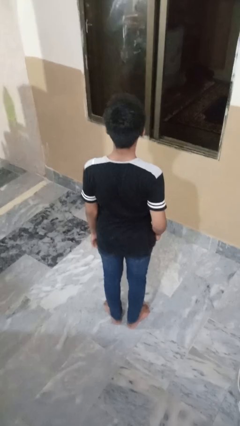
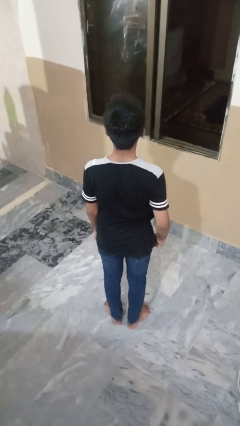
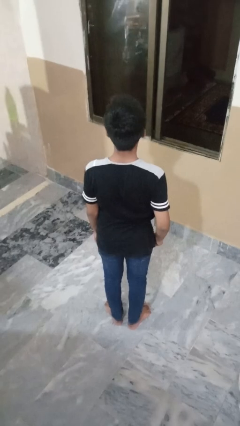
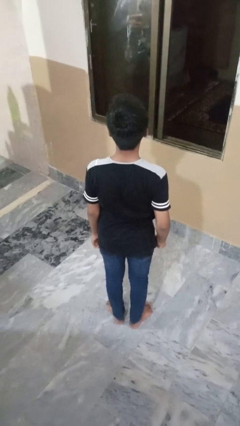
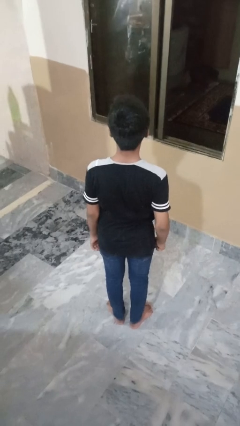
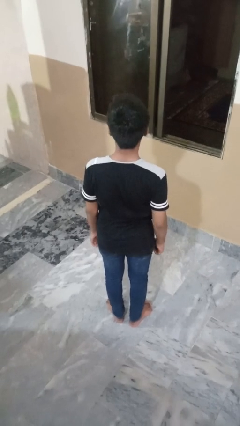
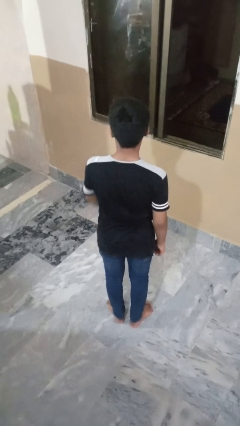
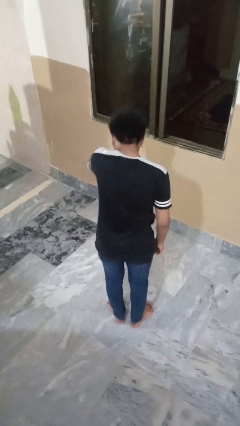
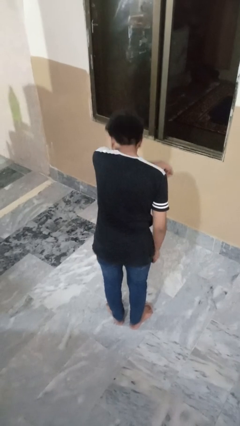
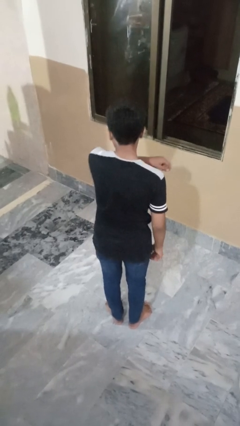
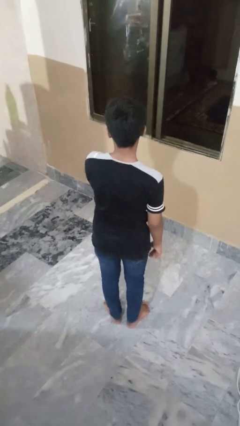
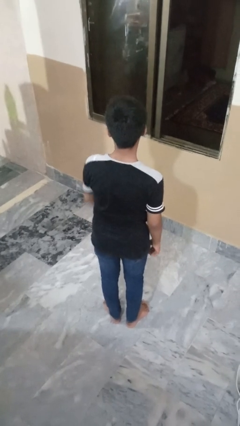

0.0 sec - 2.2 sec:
person sneezes into arm

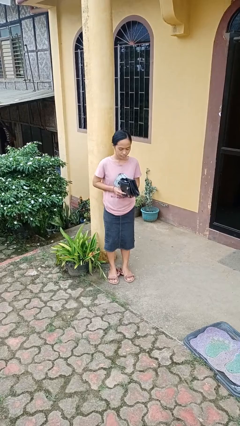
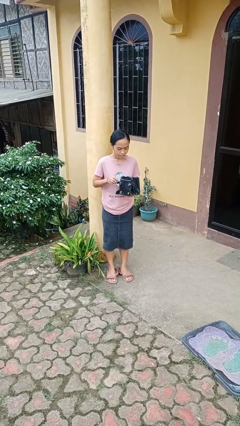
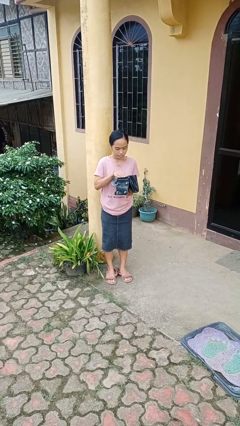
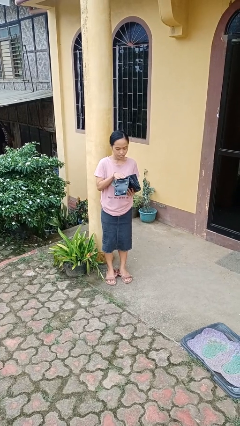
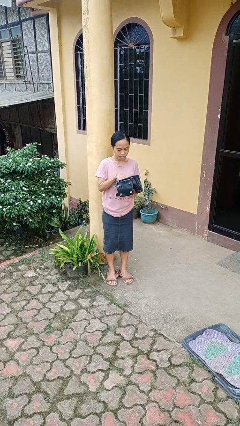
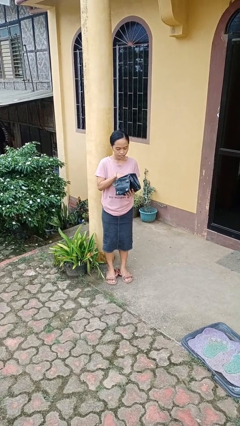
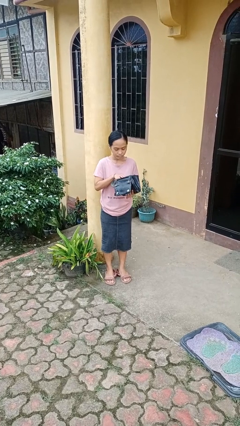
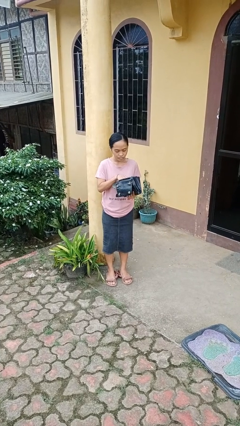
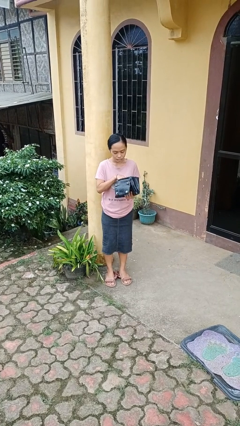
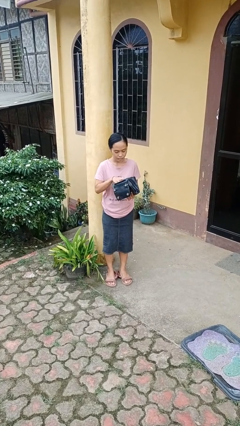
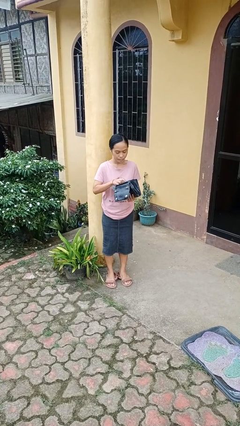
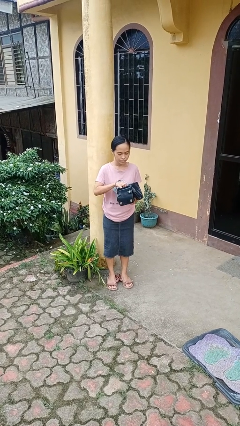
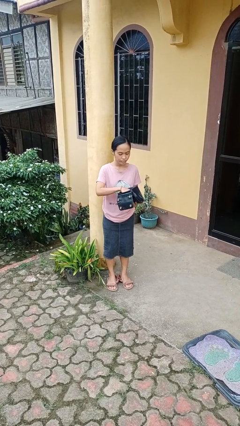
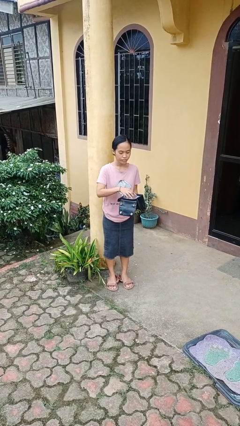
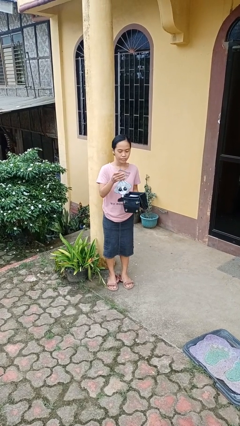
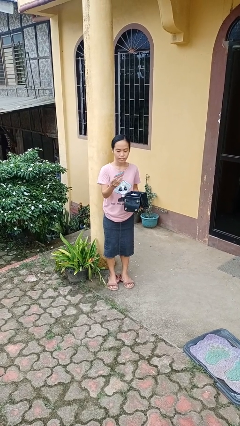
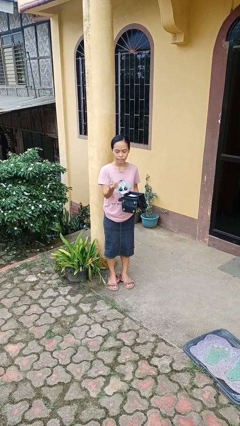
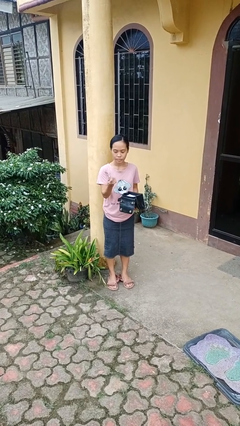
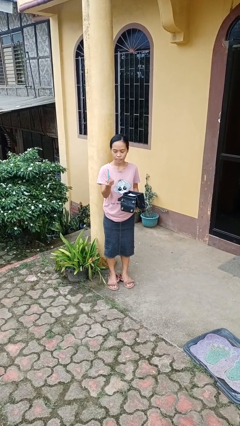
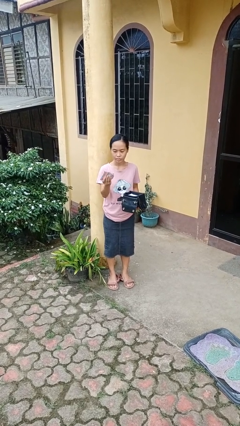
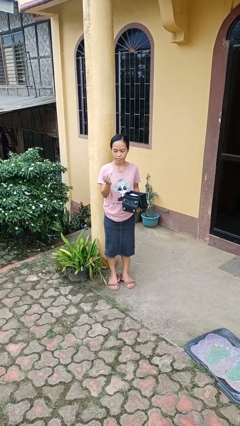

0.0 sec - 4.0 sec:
person searches in purse

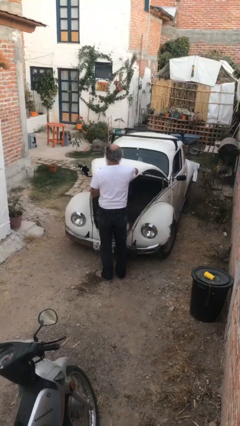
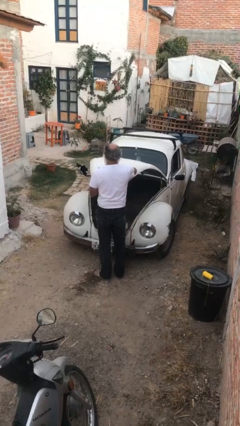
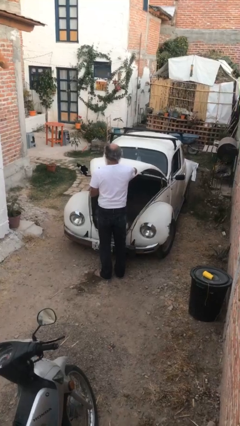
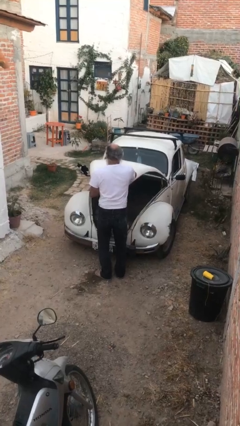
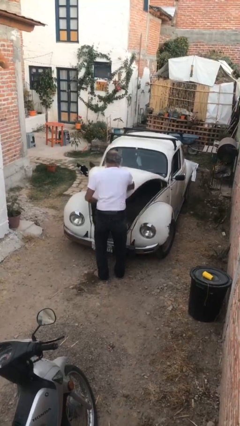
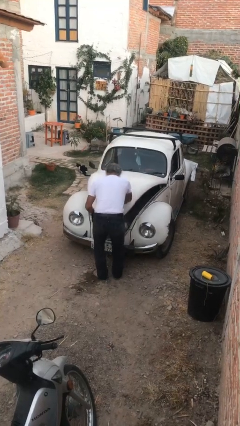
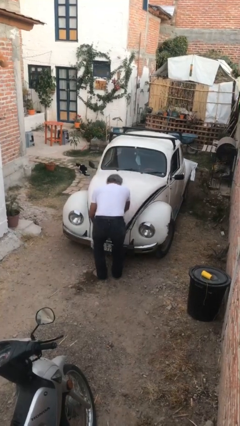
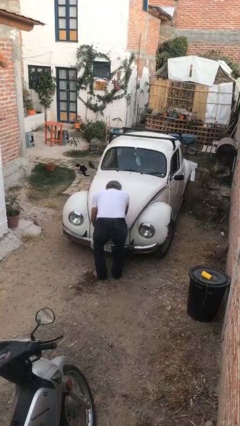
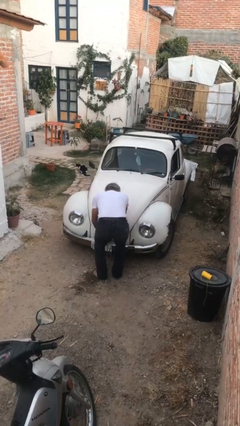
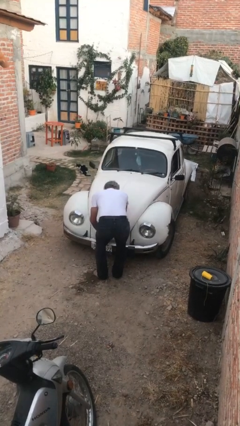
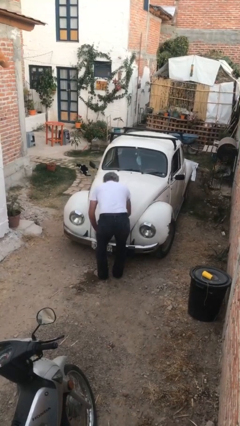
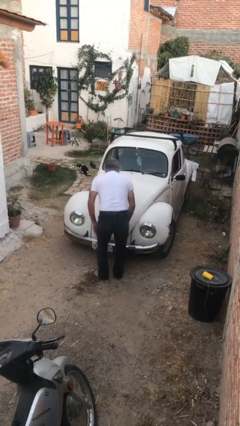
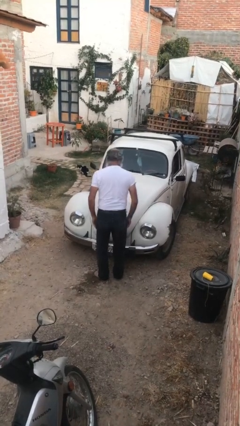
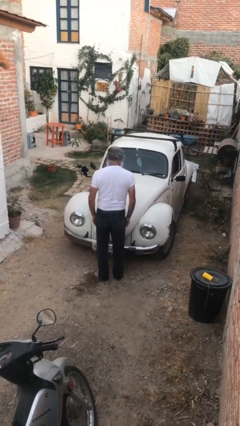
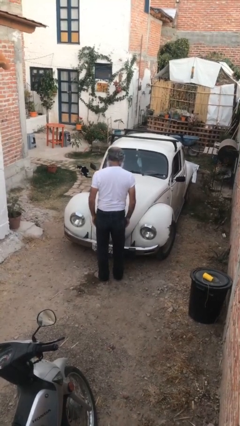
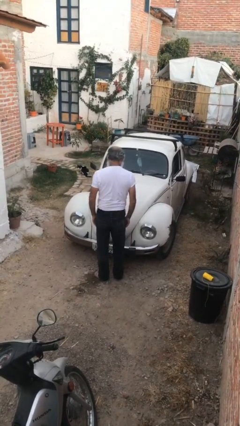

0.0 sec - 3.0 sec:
person closes car trunk

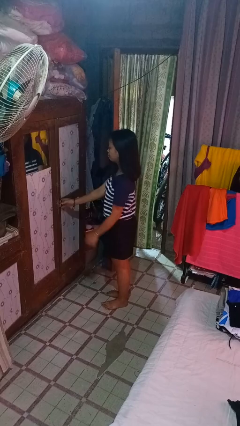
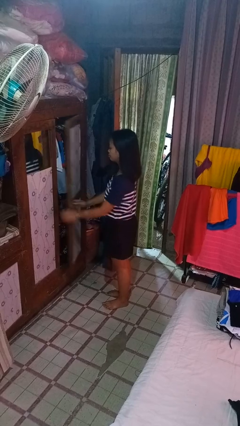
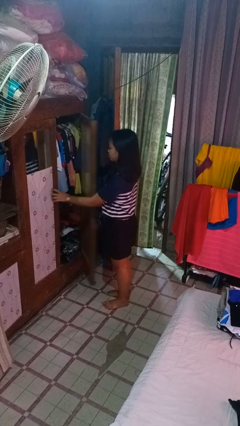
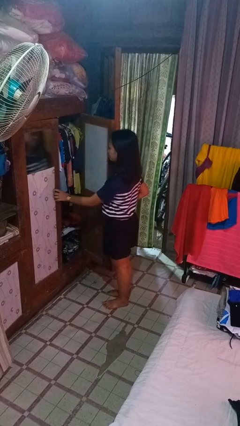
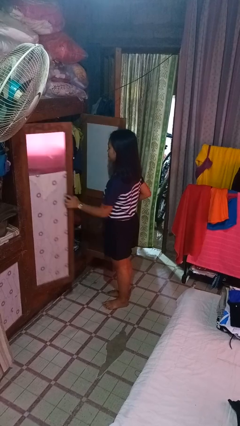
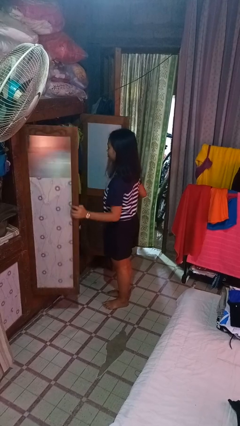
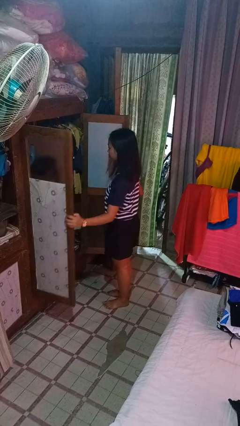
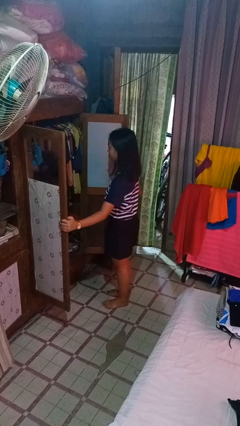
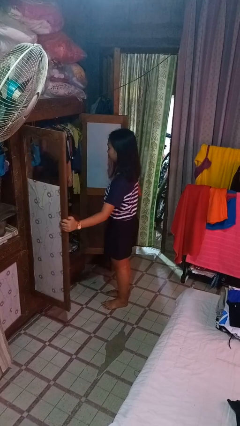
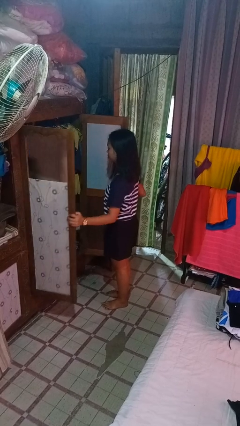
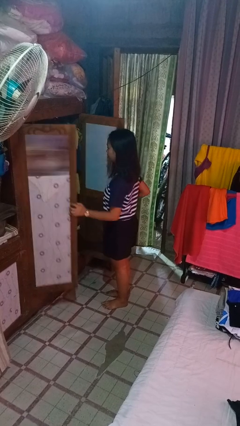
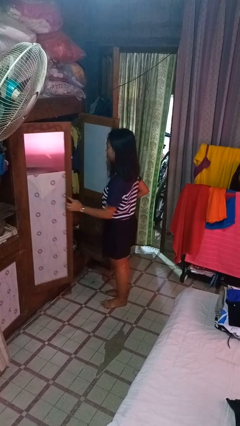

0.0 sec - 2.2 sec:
person opens closet door

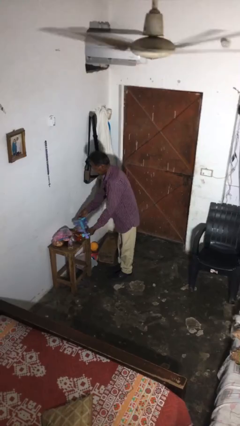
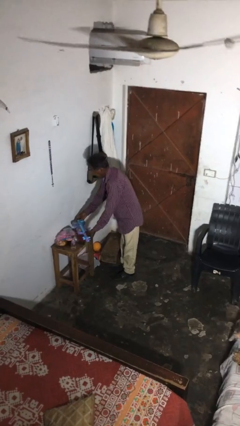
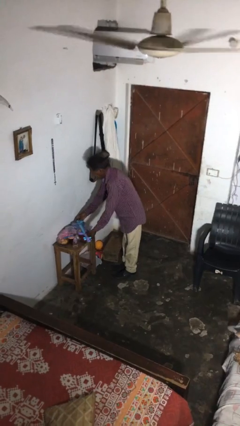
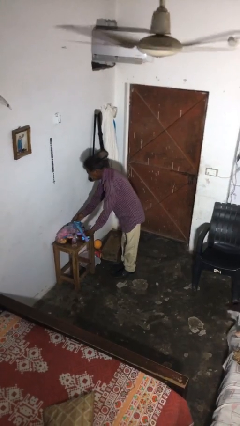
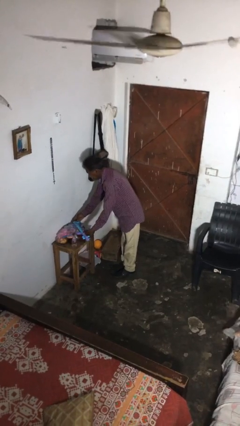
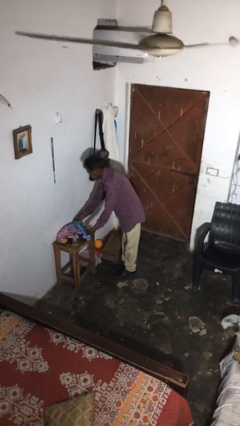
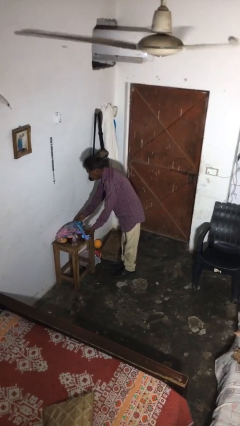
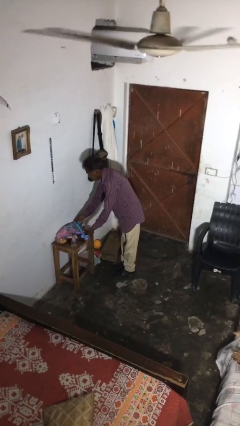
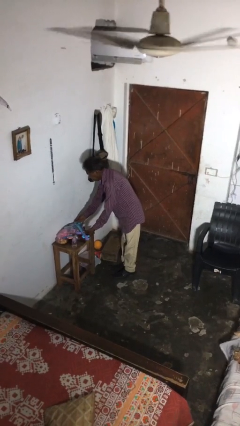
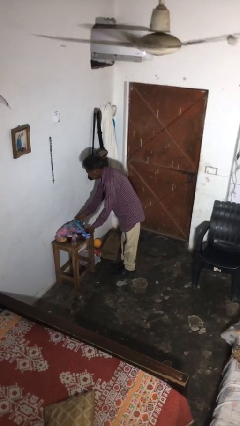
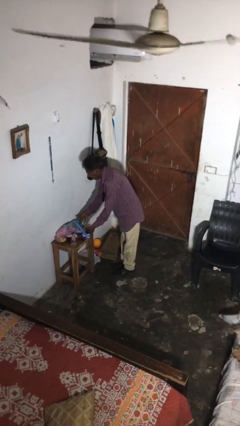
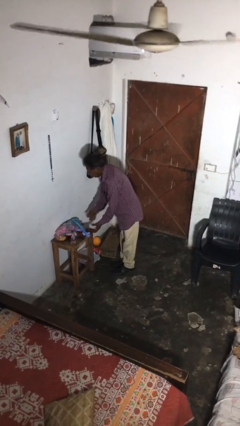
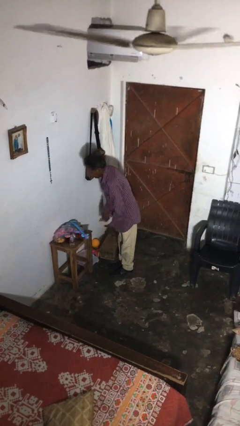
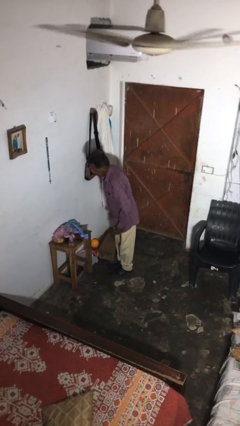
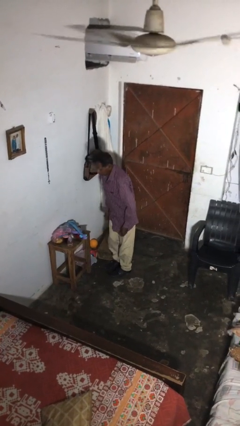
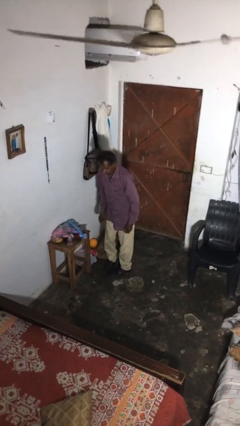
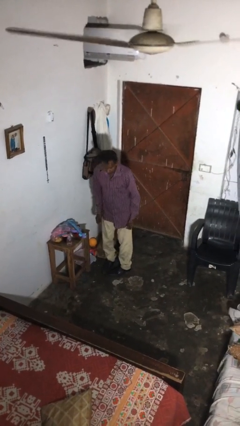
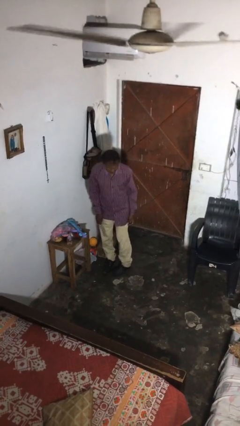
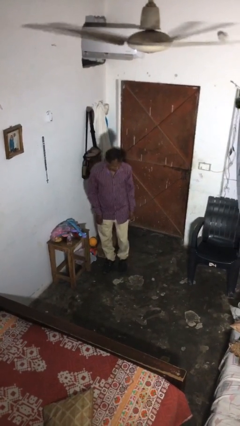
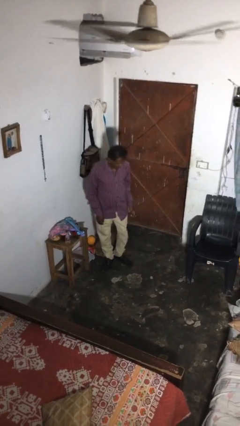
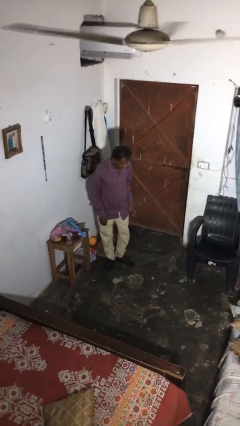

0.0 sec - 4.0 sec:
person puts down object on table

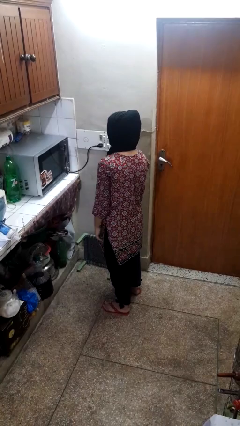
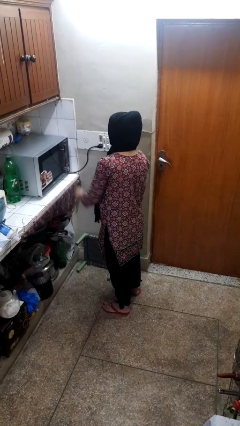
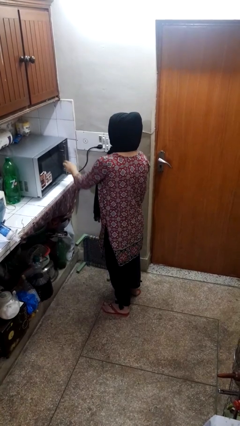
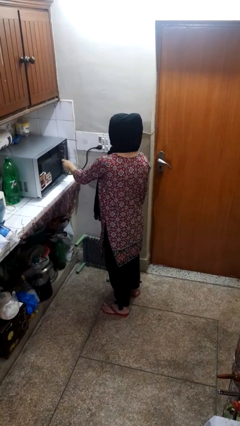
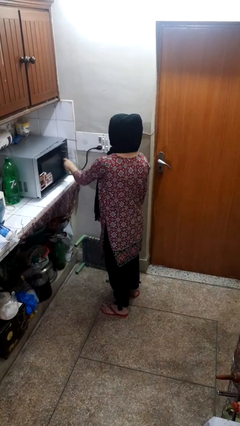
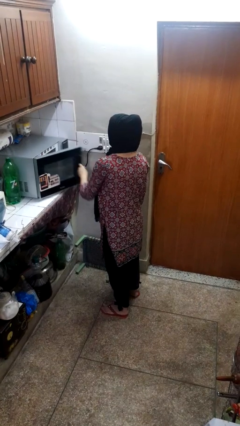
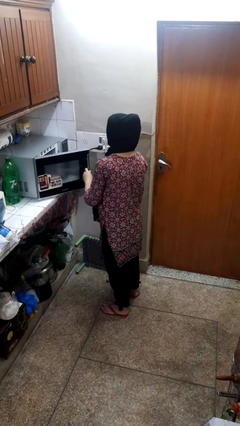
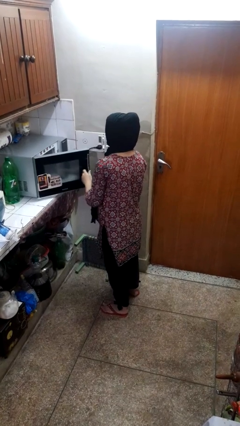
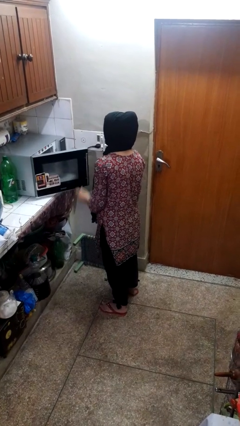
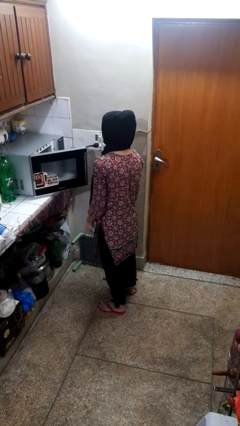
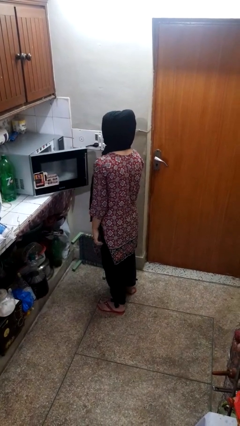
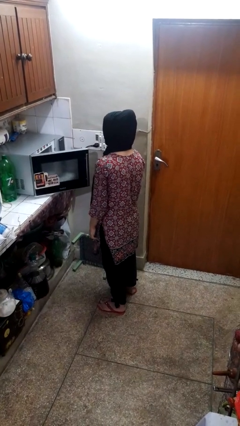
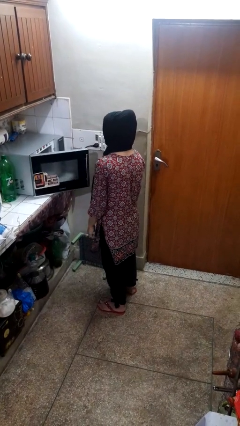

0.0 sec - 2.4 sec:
person opens oven door
